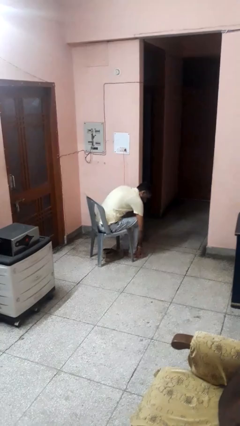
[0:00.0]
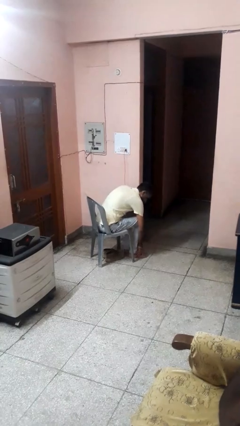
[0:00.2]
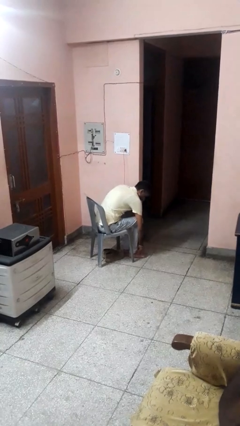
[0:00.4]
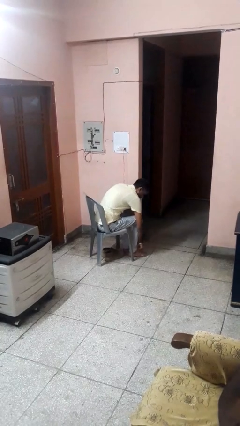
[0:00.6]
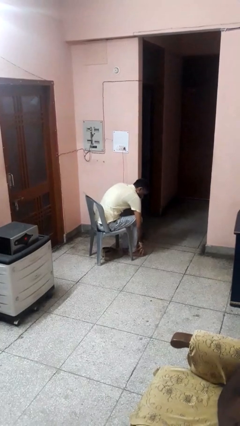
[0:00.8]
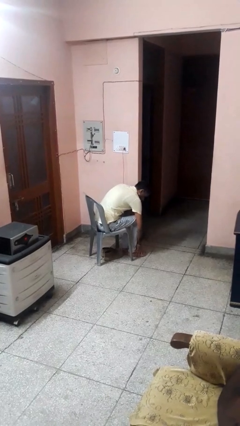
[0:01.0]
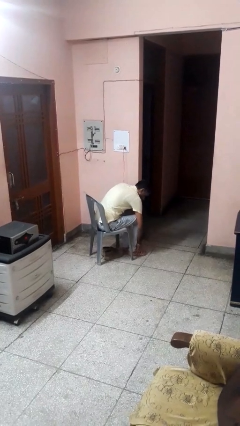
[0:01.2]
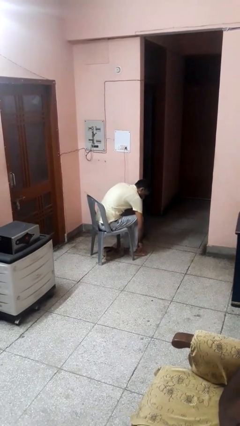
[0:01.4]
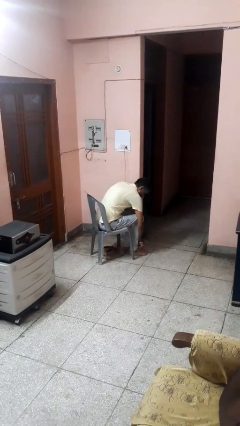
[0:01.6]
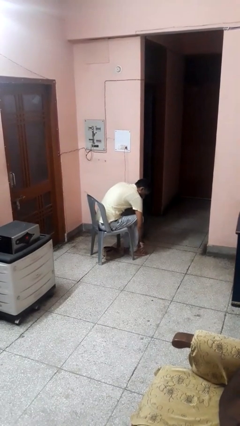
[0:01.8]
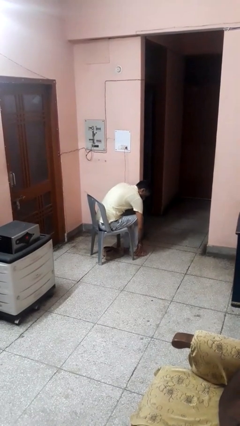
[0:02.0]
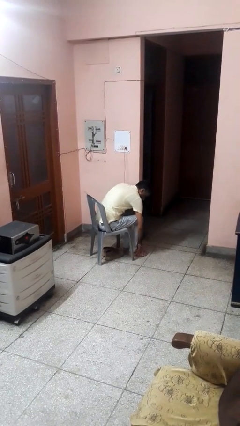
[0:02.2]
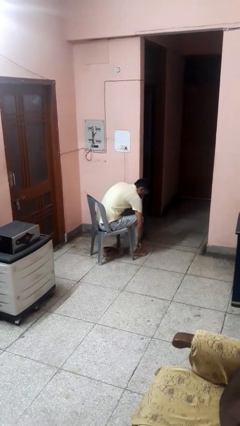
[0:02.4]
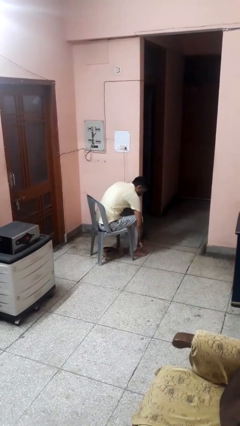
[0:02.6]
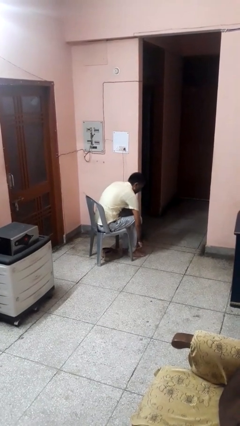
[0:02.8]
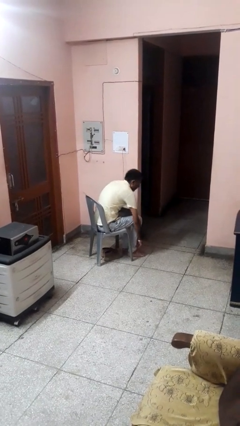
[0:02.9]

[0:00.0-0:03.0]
person rubs foot

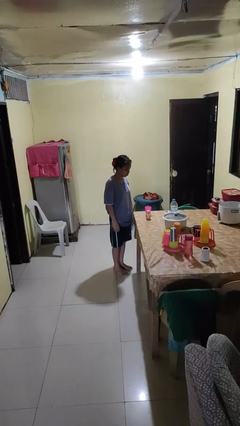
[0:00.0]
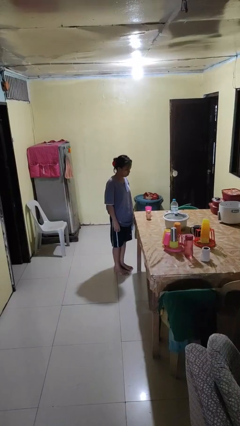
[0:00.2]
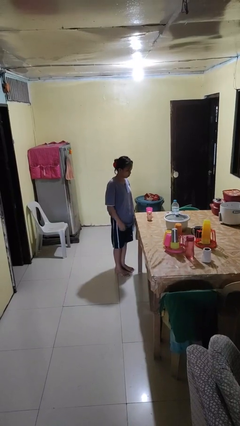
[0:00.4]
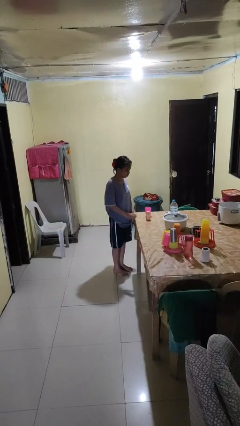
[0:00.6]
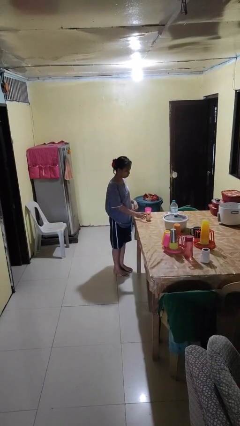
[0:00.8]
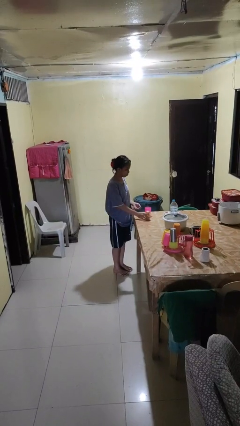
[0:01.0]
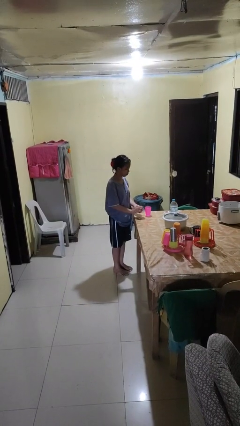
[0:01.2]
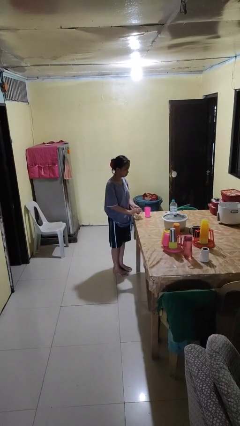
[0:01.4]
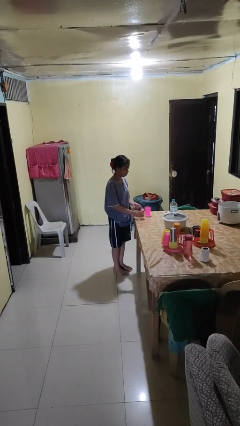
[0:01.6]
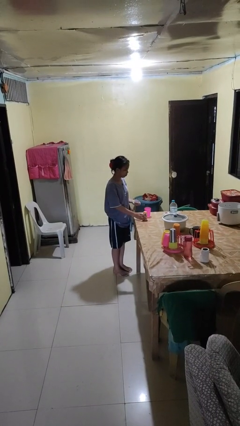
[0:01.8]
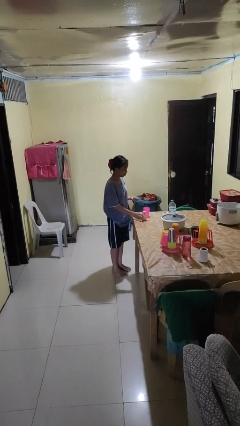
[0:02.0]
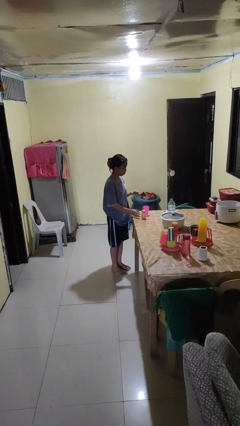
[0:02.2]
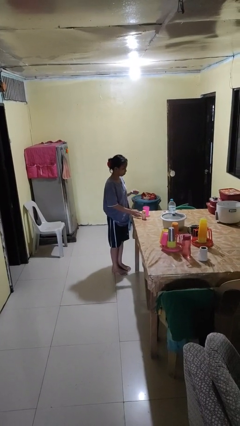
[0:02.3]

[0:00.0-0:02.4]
person takes medicine pills

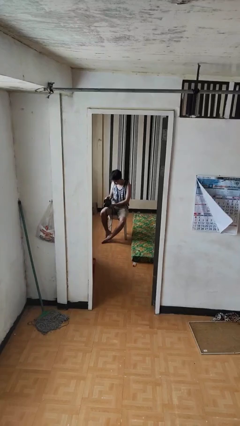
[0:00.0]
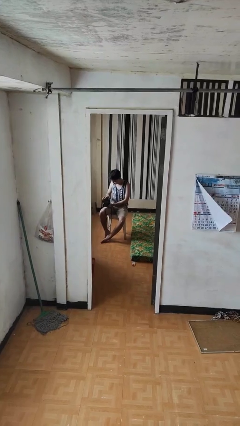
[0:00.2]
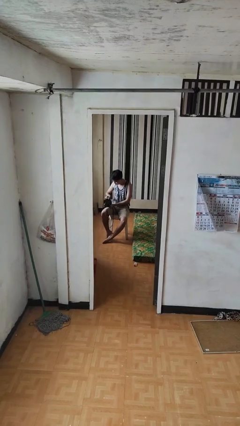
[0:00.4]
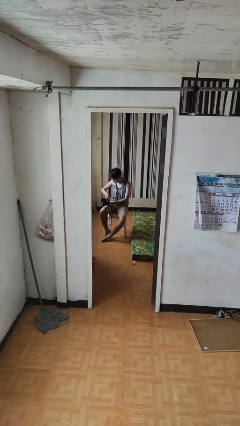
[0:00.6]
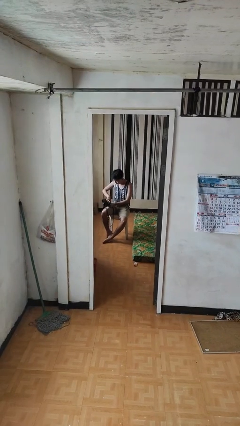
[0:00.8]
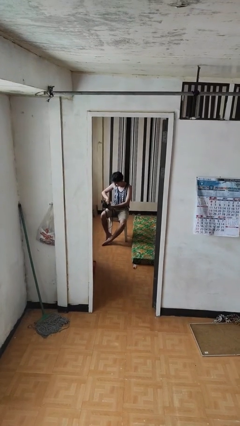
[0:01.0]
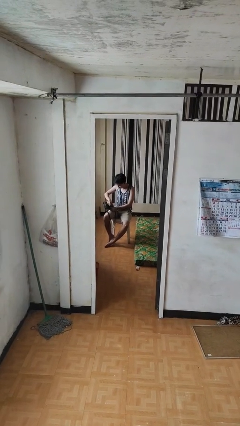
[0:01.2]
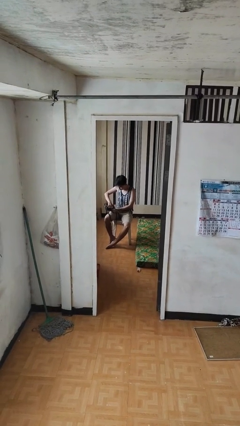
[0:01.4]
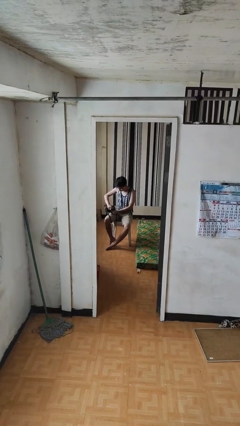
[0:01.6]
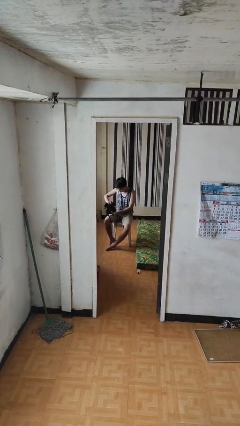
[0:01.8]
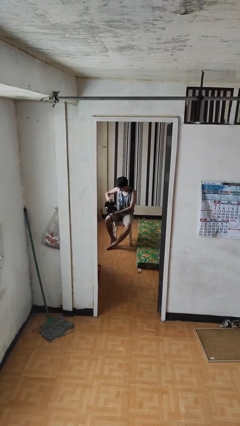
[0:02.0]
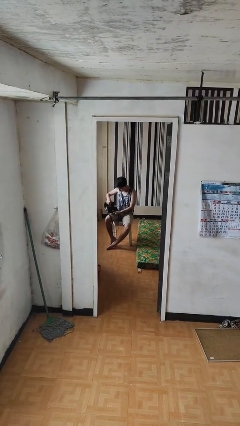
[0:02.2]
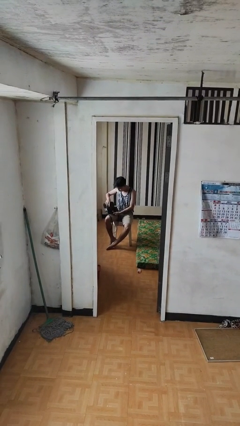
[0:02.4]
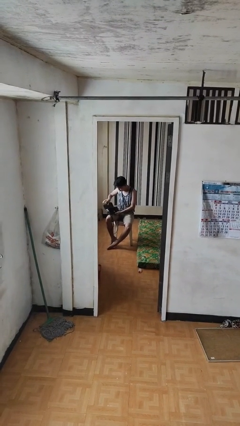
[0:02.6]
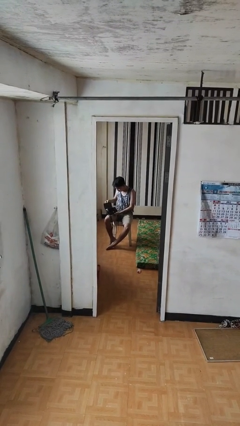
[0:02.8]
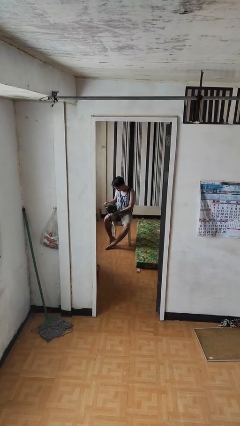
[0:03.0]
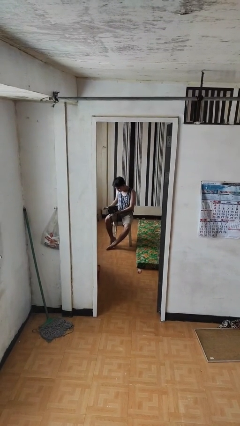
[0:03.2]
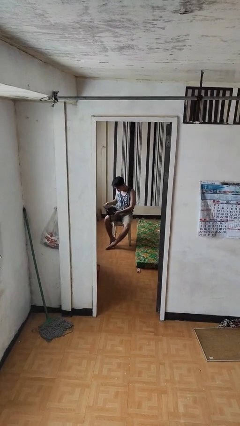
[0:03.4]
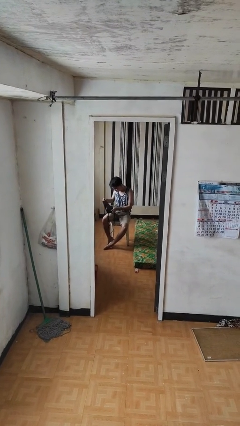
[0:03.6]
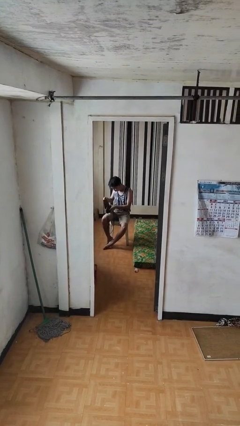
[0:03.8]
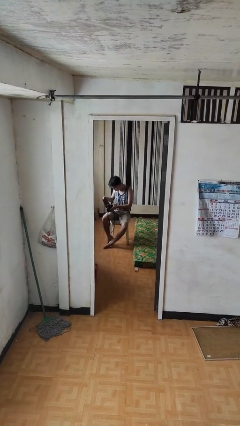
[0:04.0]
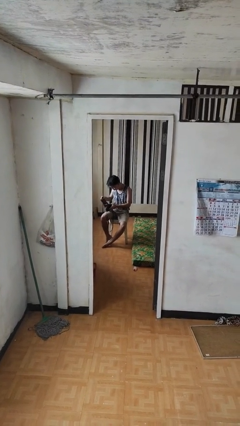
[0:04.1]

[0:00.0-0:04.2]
person searches in purse

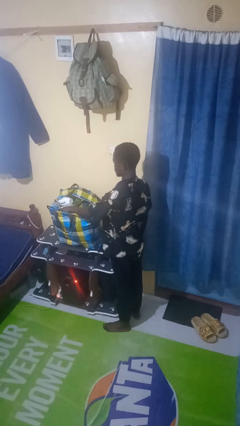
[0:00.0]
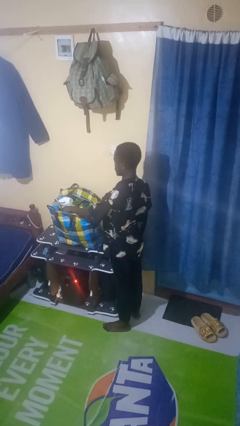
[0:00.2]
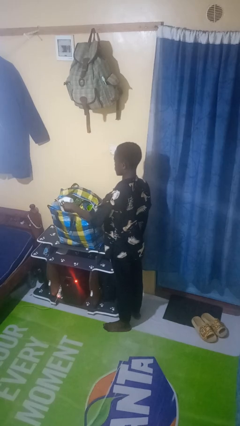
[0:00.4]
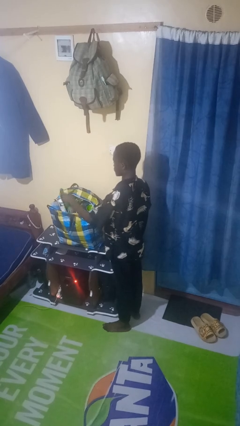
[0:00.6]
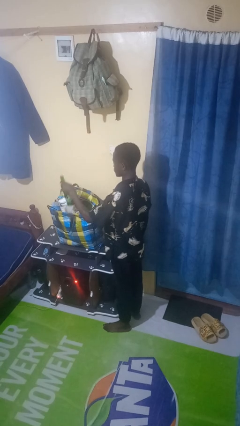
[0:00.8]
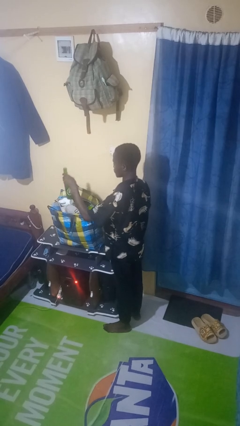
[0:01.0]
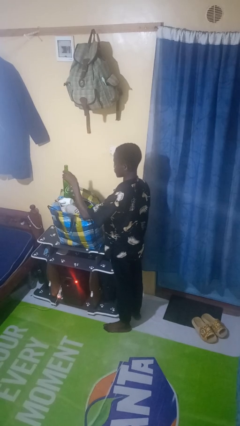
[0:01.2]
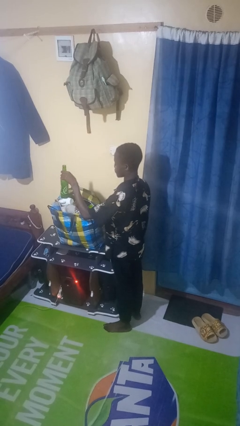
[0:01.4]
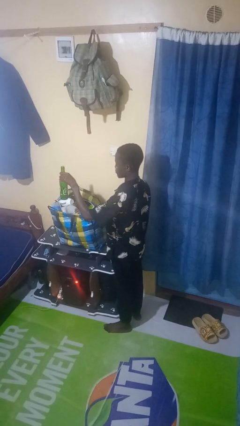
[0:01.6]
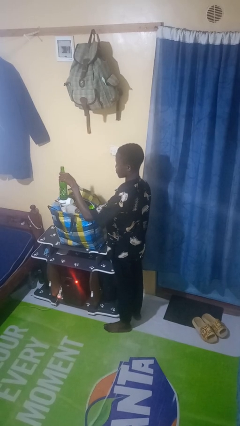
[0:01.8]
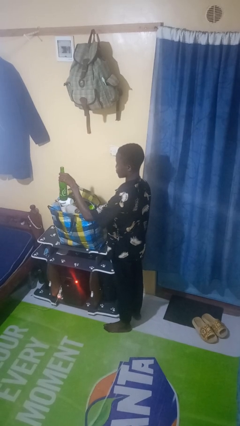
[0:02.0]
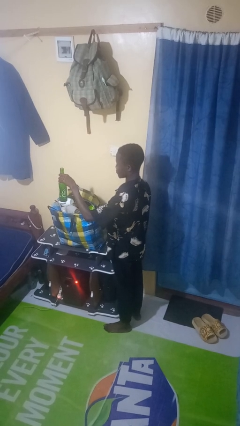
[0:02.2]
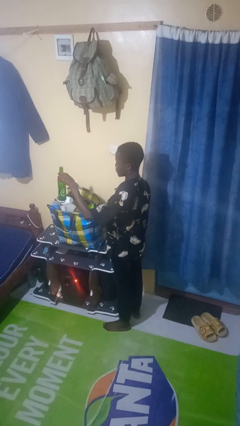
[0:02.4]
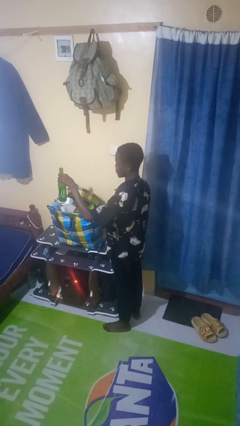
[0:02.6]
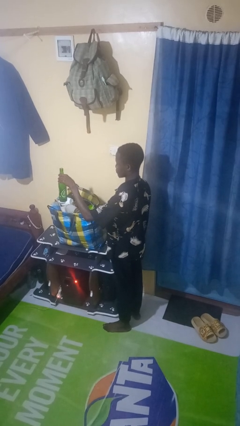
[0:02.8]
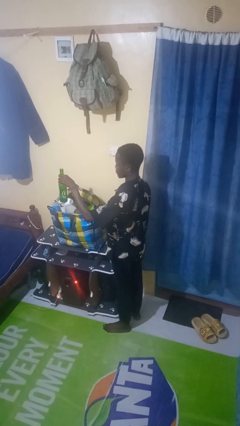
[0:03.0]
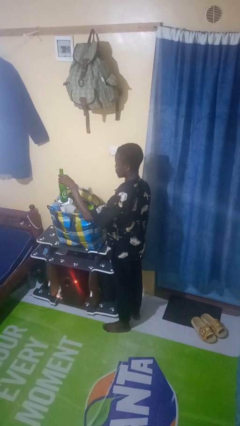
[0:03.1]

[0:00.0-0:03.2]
person takes object from bag

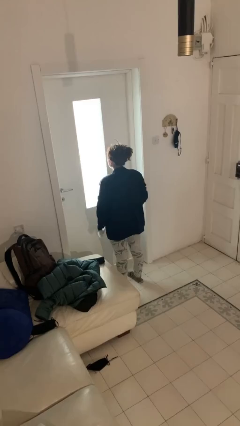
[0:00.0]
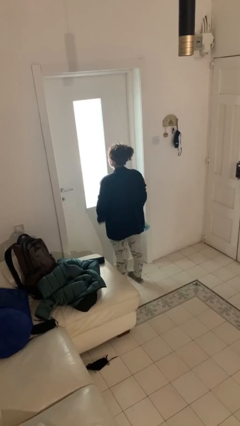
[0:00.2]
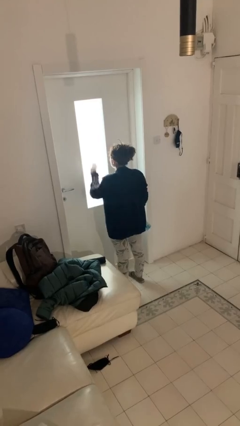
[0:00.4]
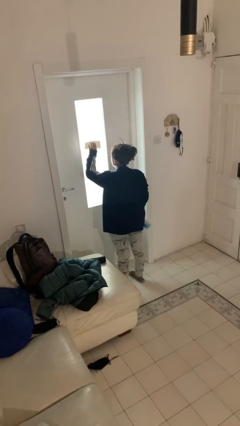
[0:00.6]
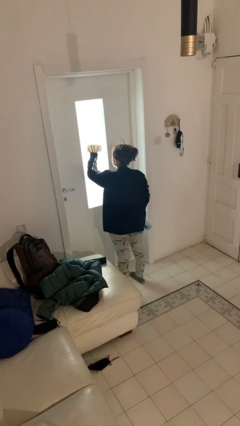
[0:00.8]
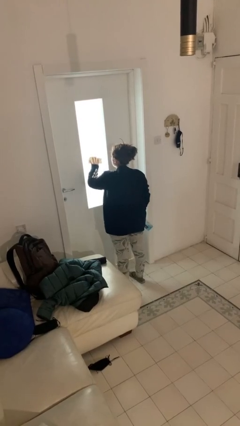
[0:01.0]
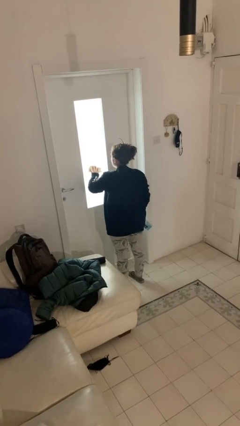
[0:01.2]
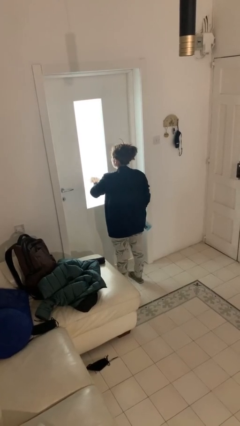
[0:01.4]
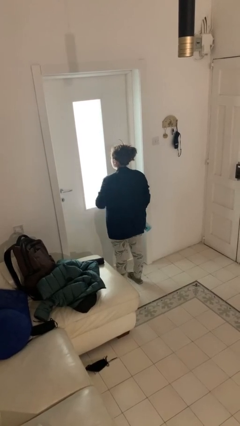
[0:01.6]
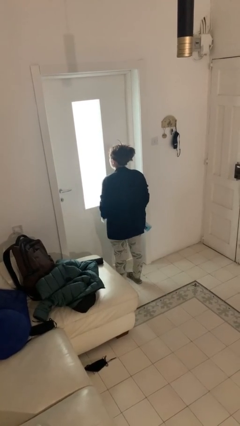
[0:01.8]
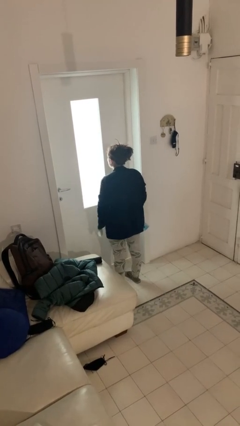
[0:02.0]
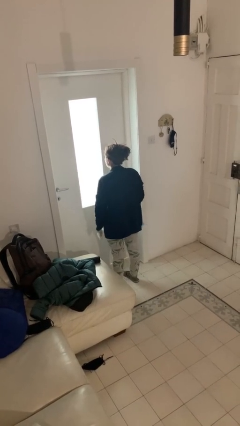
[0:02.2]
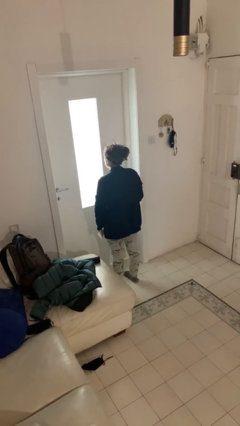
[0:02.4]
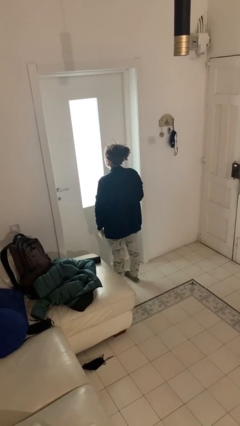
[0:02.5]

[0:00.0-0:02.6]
person washes window

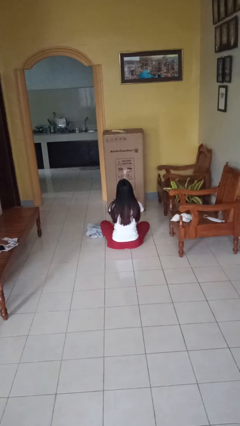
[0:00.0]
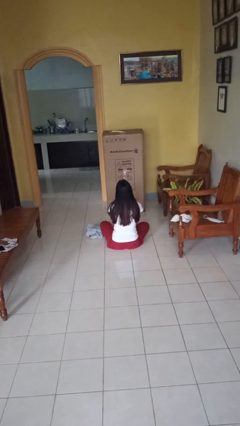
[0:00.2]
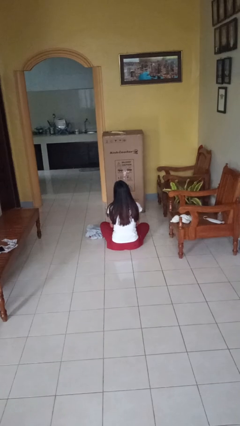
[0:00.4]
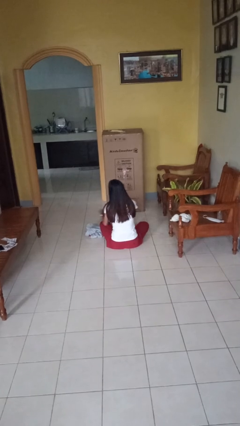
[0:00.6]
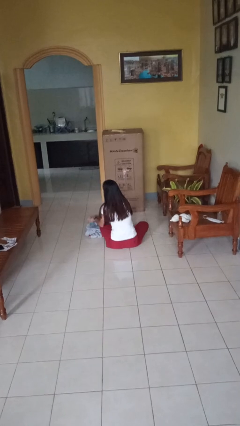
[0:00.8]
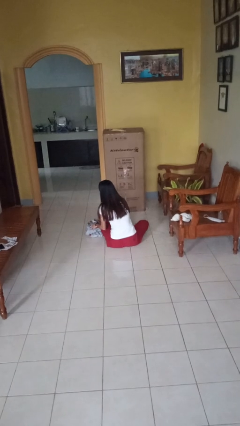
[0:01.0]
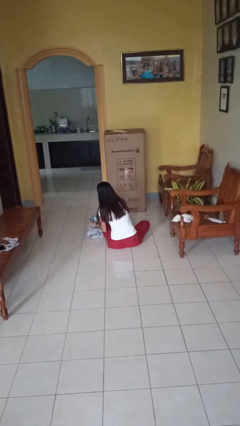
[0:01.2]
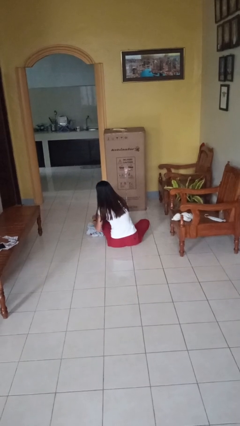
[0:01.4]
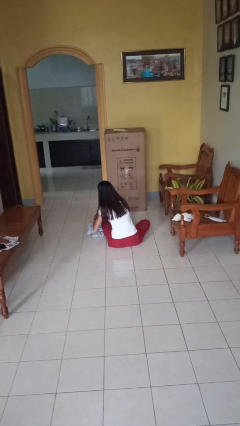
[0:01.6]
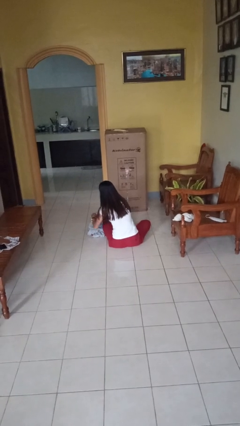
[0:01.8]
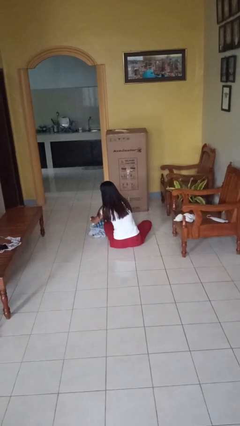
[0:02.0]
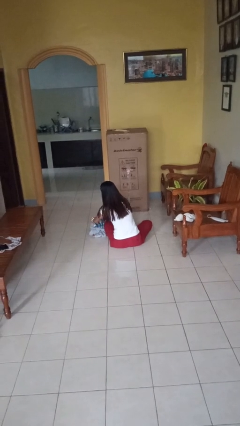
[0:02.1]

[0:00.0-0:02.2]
person folds towel
